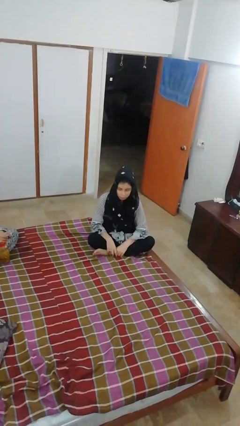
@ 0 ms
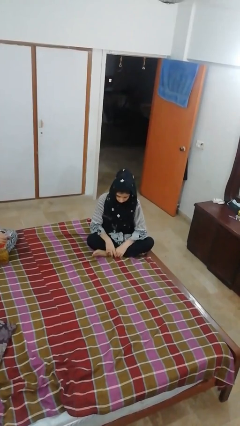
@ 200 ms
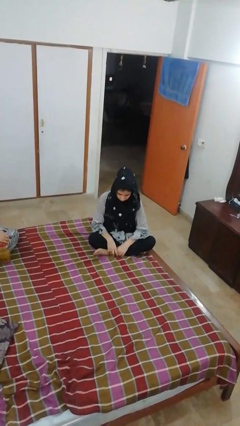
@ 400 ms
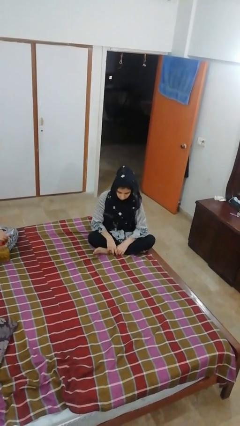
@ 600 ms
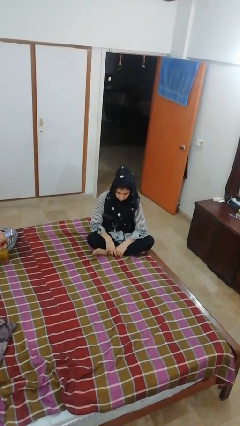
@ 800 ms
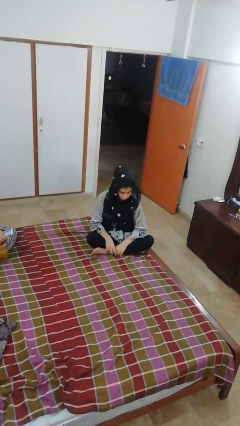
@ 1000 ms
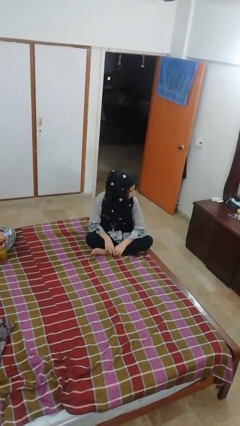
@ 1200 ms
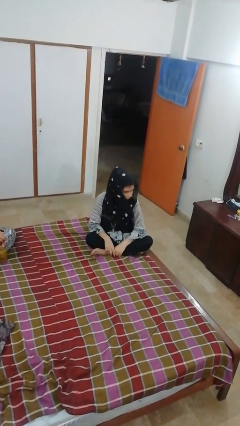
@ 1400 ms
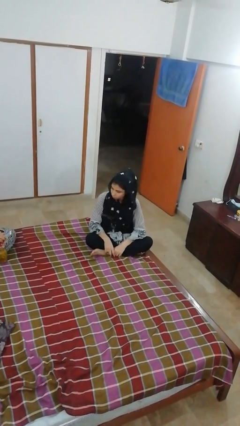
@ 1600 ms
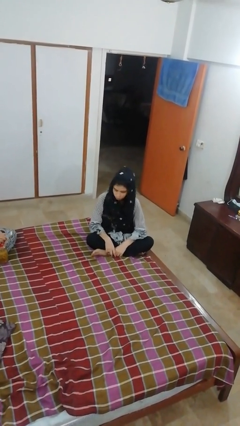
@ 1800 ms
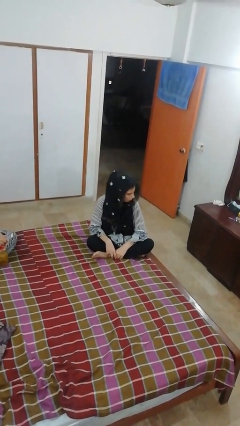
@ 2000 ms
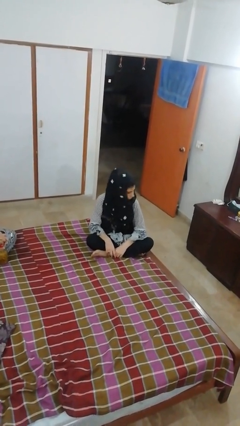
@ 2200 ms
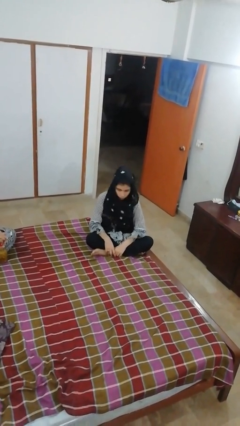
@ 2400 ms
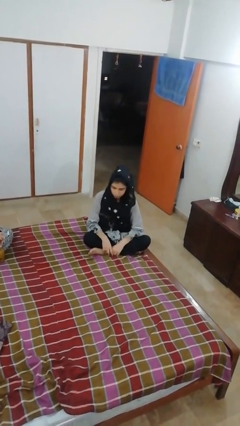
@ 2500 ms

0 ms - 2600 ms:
person shakes head

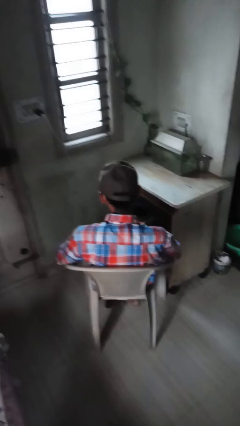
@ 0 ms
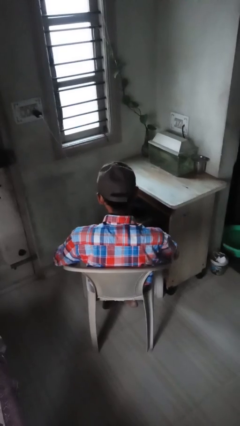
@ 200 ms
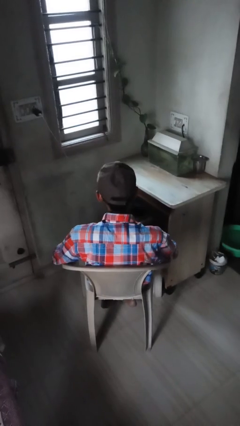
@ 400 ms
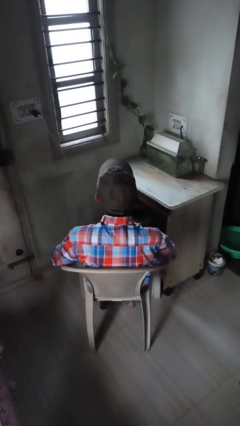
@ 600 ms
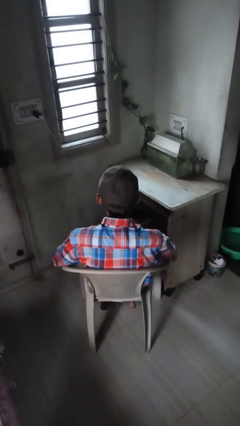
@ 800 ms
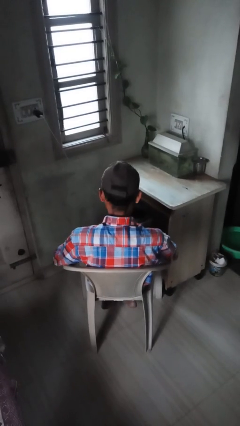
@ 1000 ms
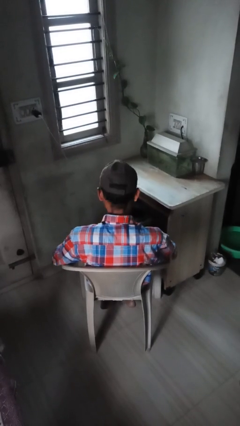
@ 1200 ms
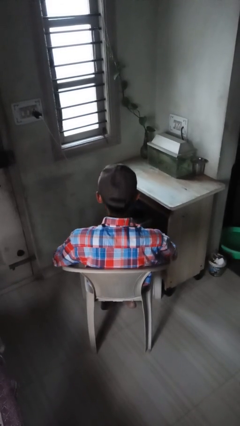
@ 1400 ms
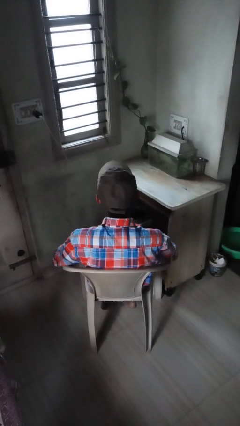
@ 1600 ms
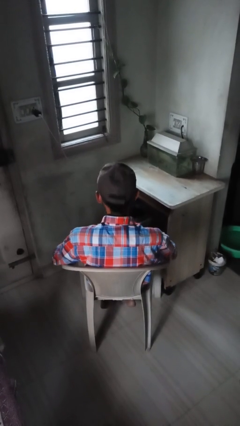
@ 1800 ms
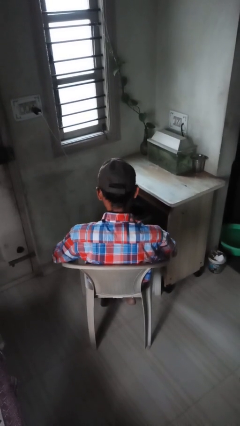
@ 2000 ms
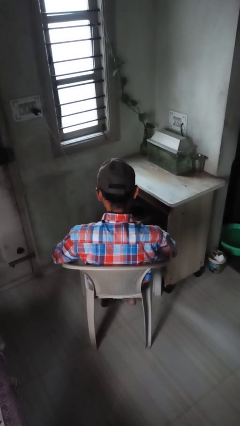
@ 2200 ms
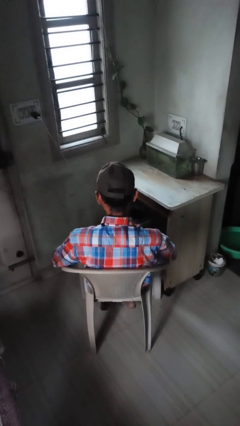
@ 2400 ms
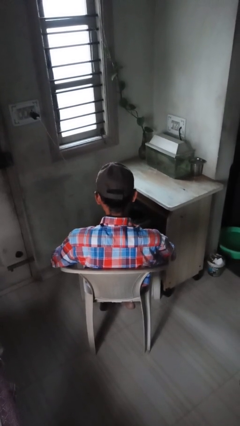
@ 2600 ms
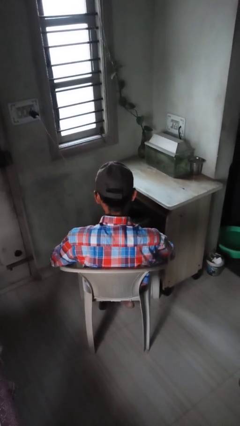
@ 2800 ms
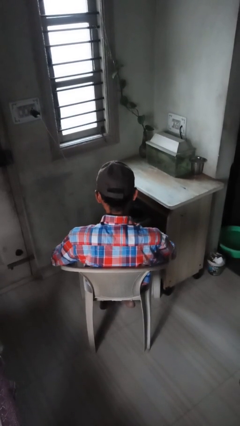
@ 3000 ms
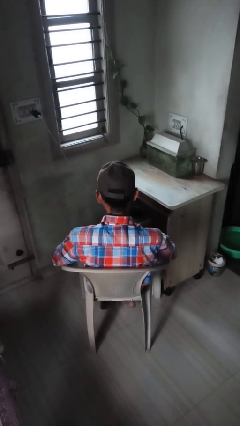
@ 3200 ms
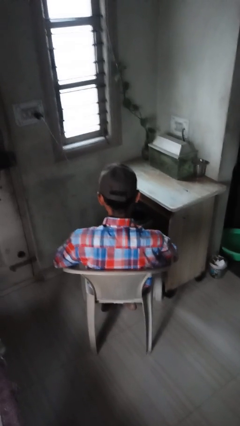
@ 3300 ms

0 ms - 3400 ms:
person nods head

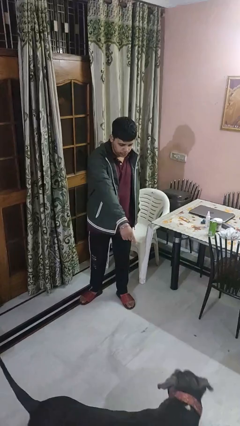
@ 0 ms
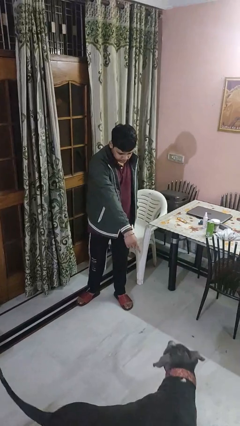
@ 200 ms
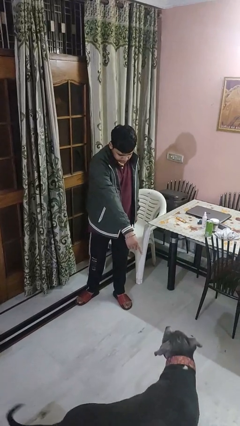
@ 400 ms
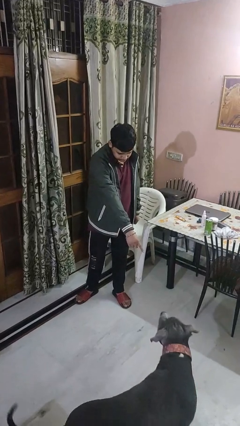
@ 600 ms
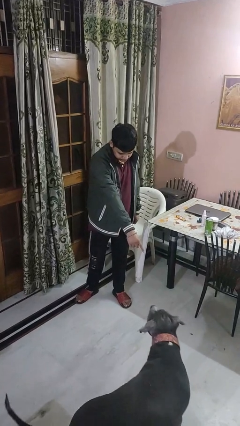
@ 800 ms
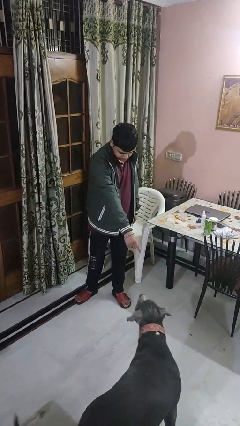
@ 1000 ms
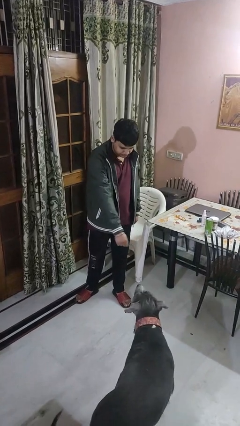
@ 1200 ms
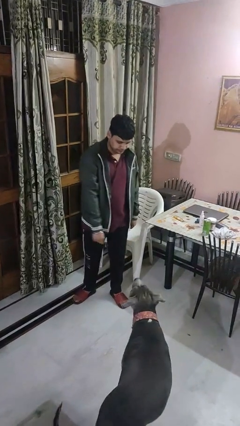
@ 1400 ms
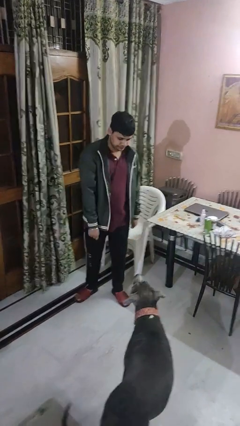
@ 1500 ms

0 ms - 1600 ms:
person points to dog

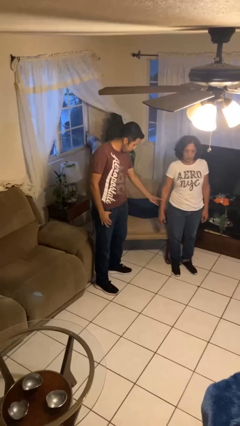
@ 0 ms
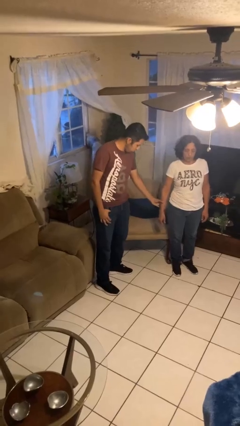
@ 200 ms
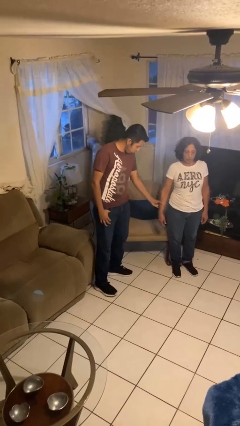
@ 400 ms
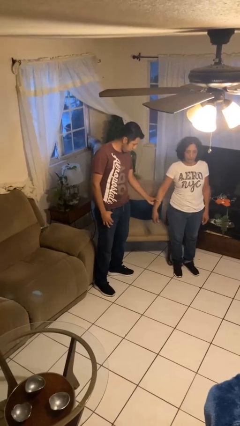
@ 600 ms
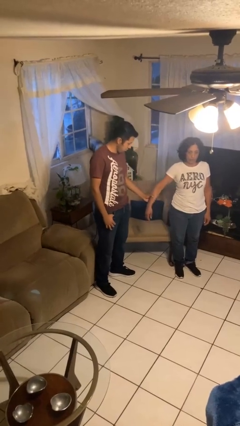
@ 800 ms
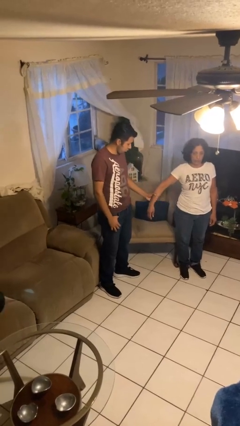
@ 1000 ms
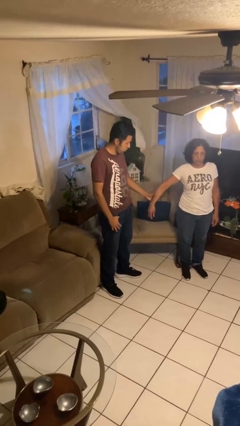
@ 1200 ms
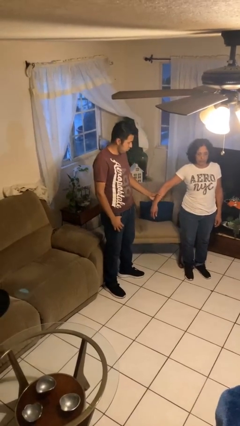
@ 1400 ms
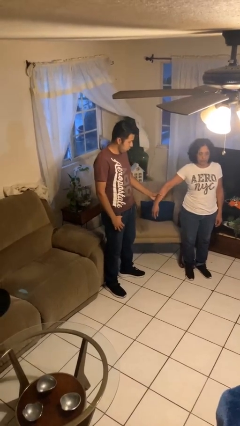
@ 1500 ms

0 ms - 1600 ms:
person grabs person by forearm

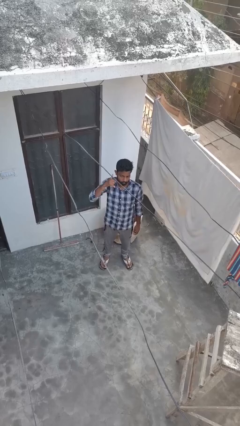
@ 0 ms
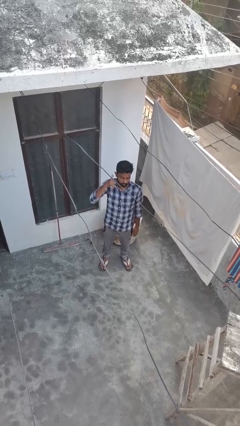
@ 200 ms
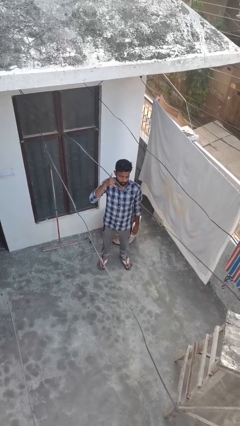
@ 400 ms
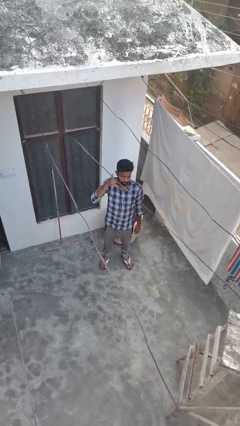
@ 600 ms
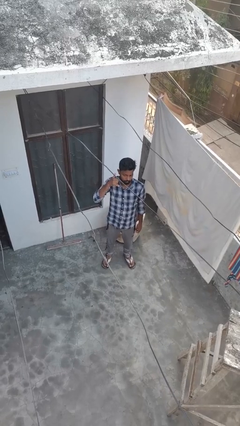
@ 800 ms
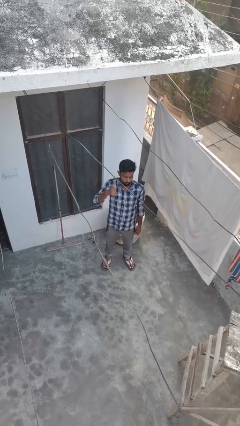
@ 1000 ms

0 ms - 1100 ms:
person gestures call me

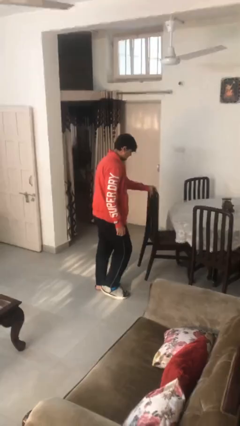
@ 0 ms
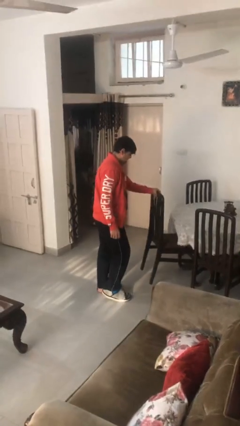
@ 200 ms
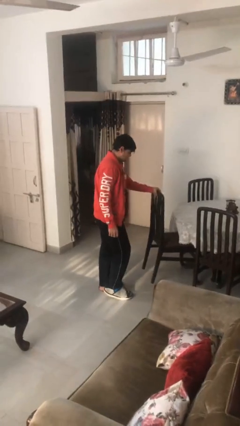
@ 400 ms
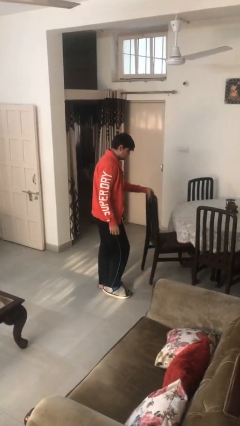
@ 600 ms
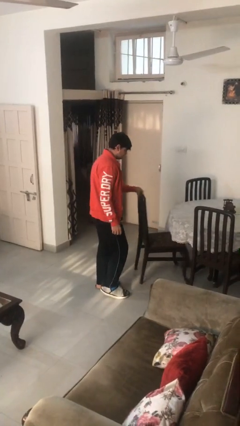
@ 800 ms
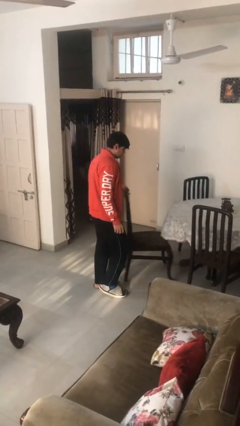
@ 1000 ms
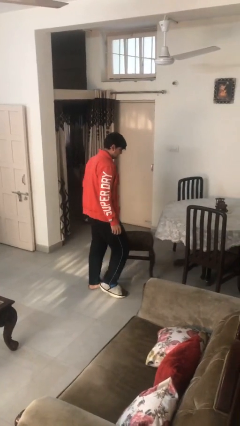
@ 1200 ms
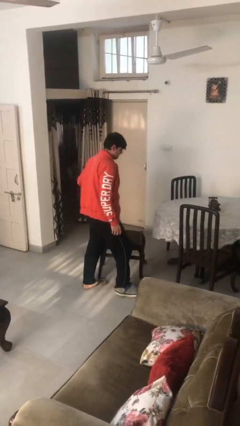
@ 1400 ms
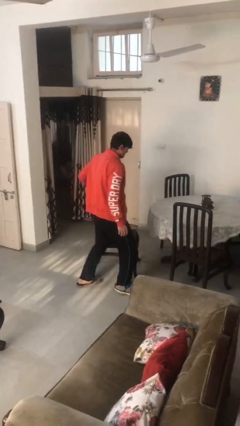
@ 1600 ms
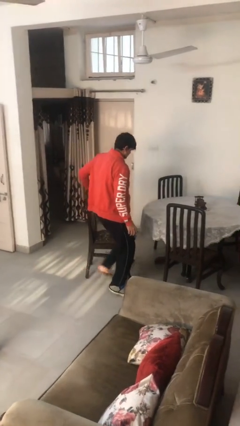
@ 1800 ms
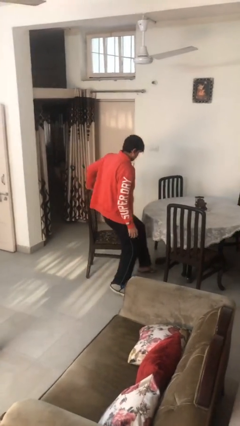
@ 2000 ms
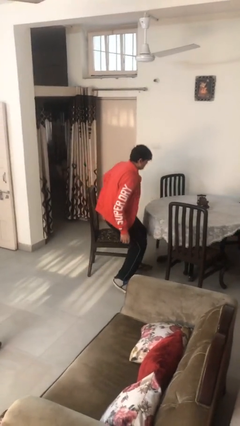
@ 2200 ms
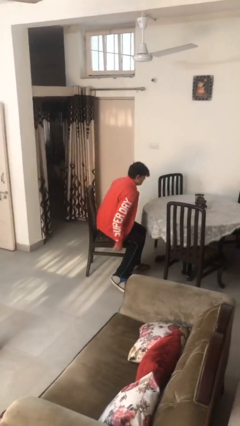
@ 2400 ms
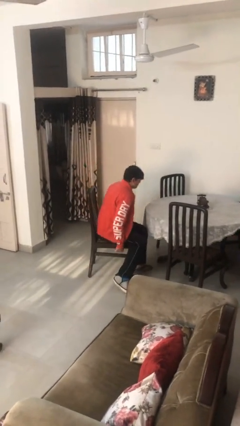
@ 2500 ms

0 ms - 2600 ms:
person sits down

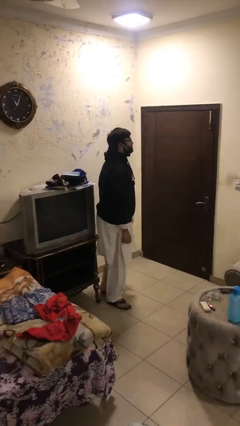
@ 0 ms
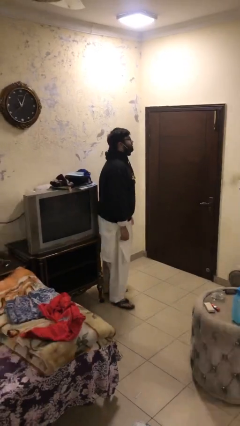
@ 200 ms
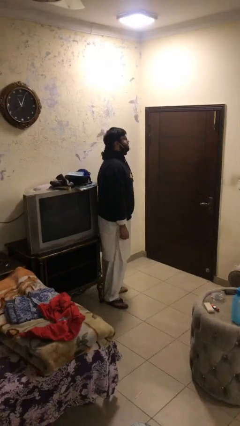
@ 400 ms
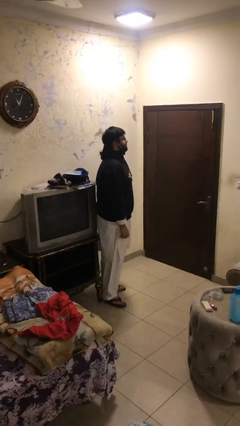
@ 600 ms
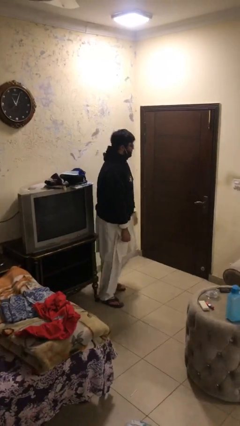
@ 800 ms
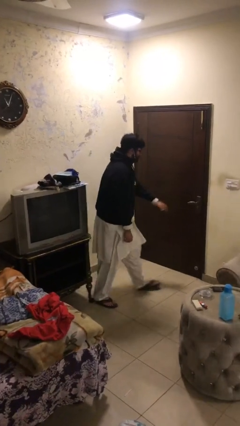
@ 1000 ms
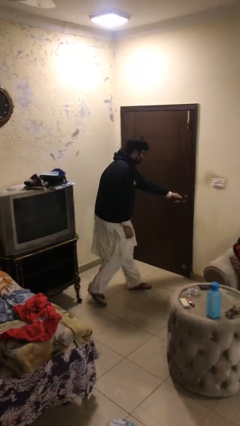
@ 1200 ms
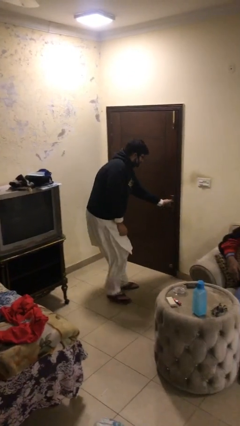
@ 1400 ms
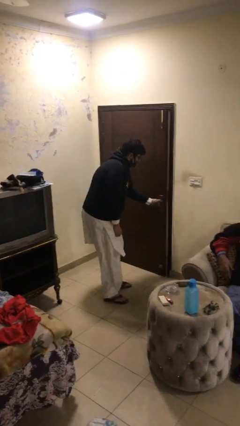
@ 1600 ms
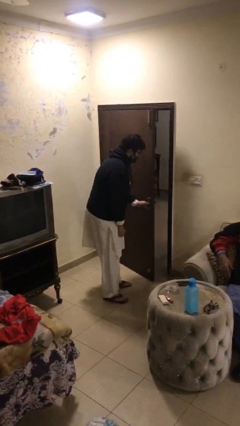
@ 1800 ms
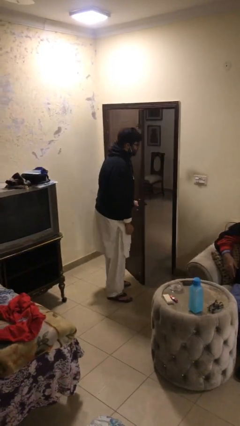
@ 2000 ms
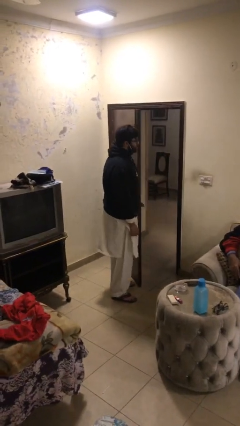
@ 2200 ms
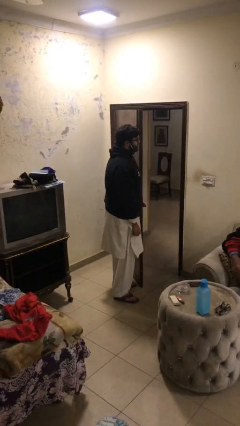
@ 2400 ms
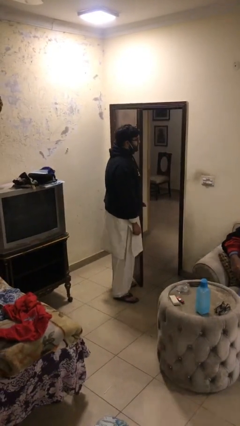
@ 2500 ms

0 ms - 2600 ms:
person opens facility door

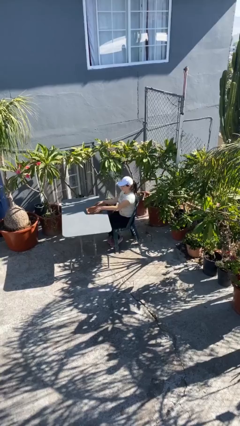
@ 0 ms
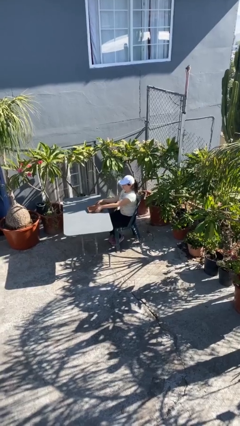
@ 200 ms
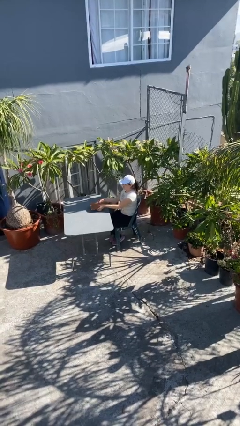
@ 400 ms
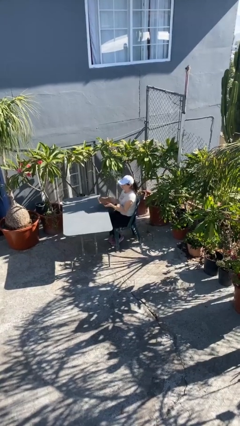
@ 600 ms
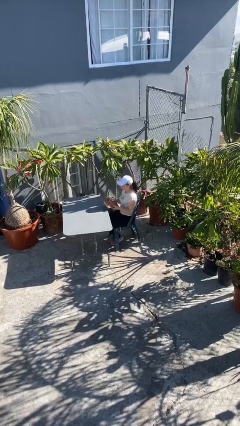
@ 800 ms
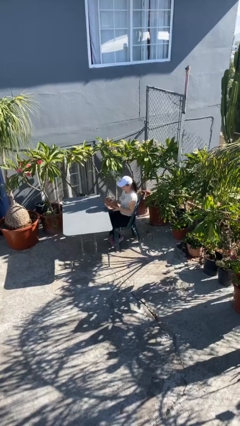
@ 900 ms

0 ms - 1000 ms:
person picks up object from table

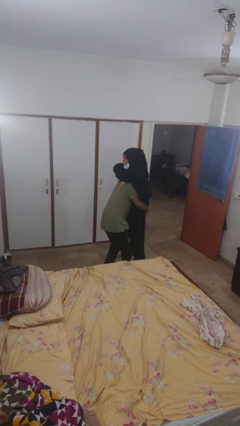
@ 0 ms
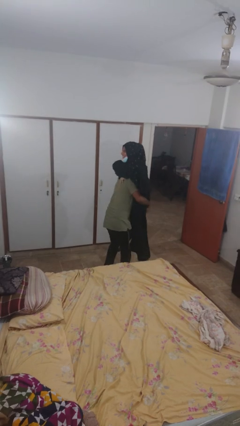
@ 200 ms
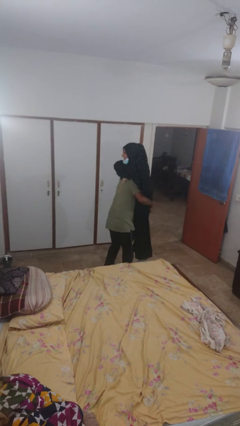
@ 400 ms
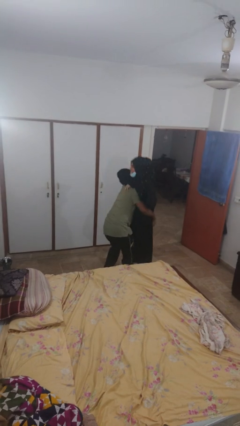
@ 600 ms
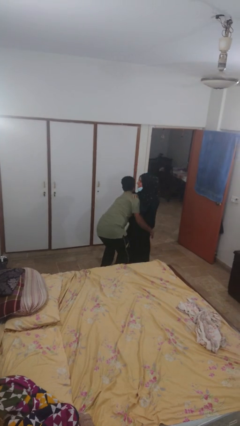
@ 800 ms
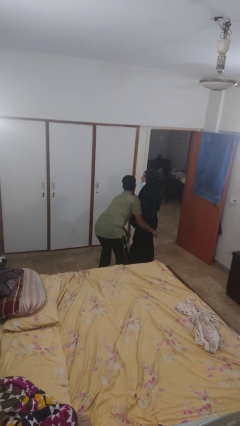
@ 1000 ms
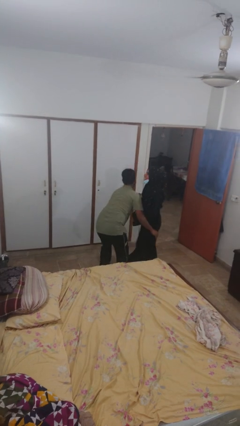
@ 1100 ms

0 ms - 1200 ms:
person puts down person
